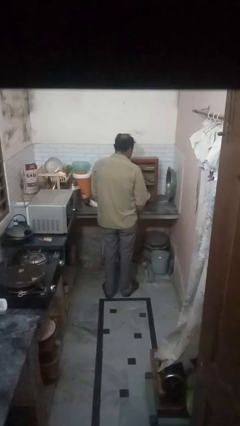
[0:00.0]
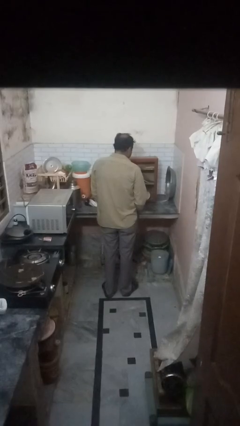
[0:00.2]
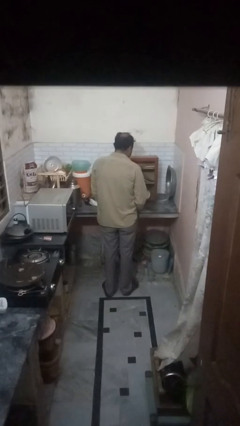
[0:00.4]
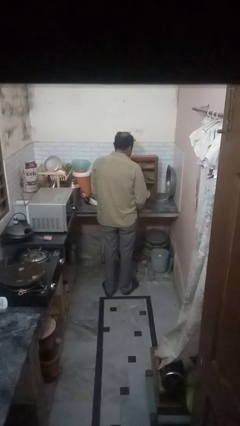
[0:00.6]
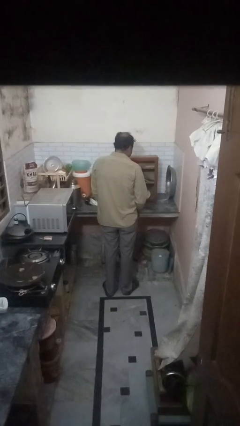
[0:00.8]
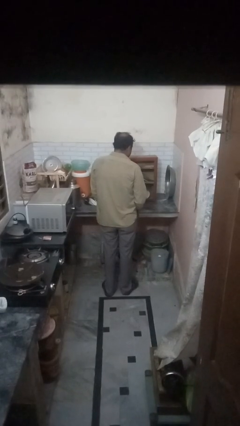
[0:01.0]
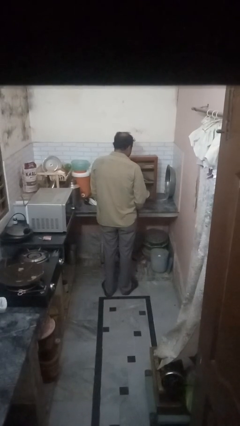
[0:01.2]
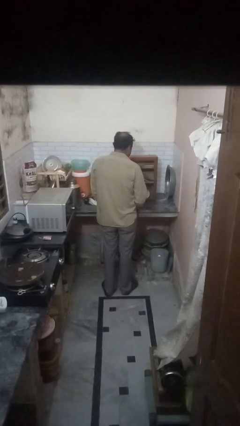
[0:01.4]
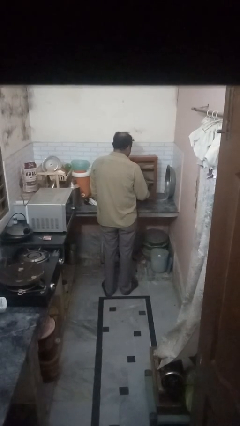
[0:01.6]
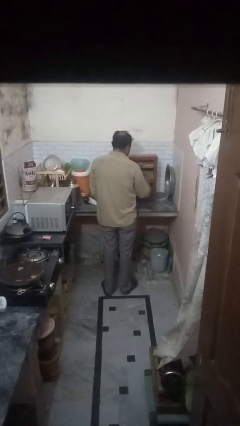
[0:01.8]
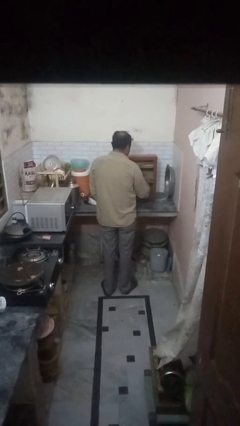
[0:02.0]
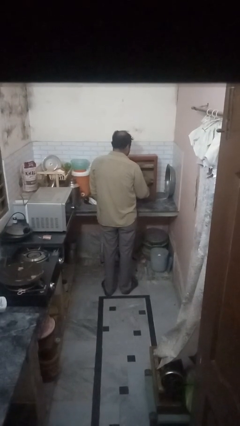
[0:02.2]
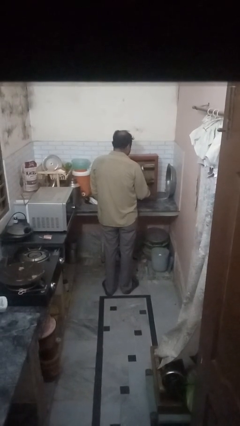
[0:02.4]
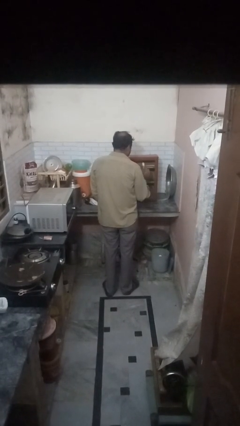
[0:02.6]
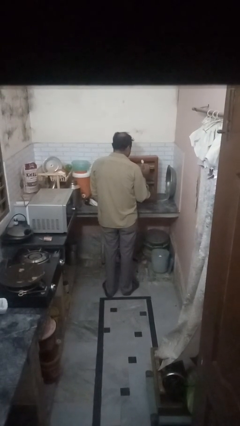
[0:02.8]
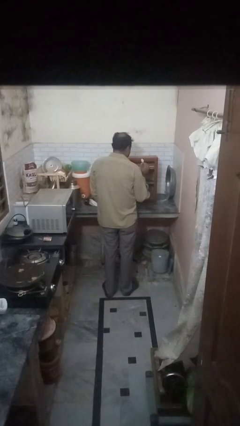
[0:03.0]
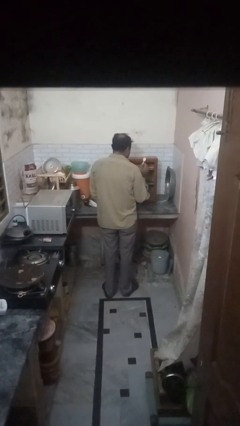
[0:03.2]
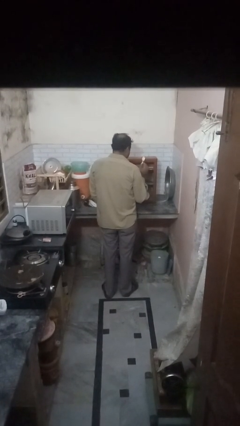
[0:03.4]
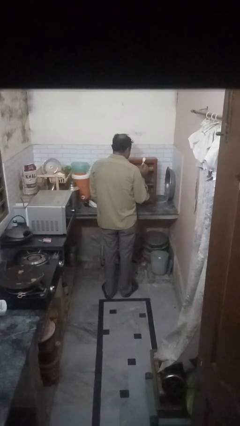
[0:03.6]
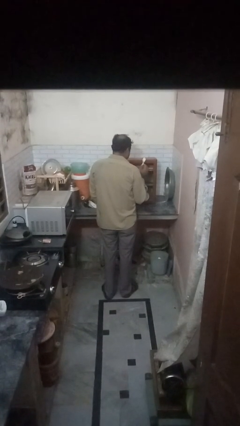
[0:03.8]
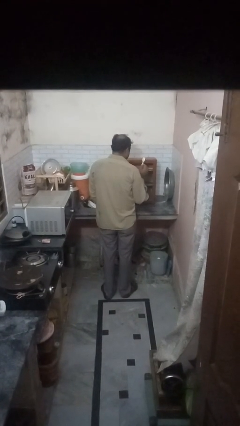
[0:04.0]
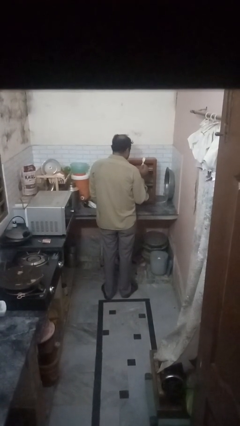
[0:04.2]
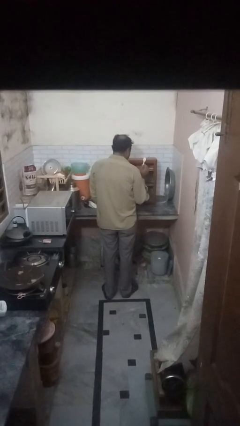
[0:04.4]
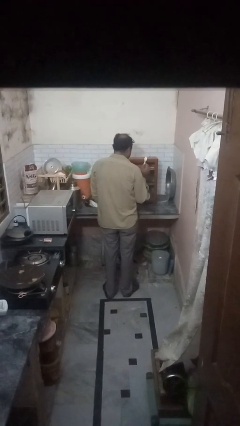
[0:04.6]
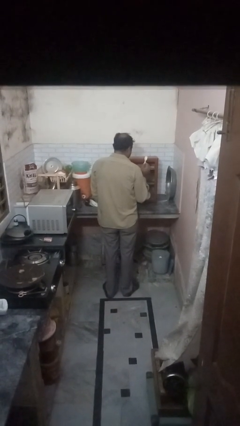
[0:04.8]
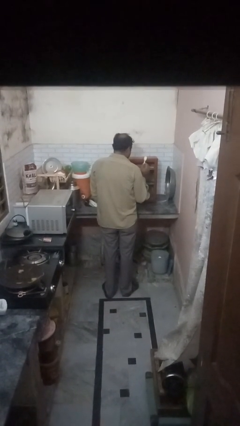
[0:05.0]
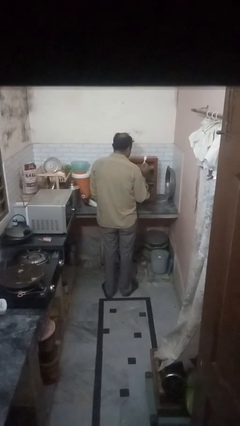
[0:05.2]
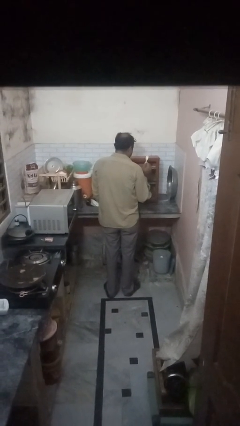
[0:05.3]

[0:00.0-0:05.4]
person puts object in cabinet

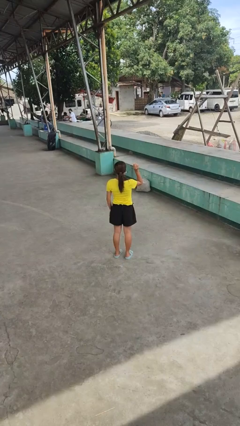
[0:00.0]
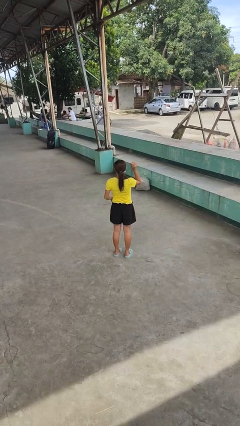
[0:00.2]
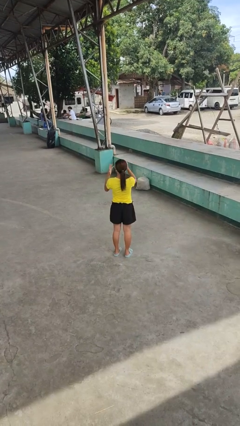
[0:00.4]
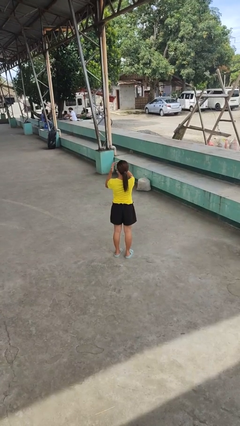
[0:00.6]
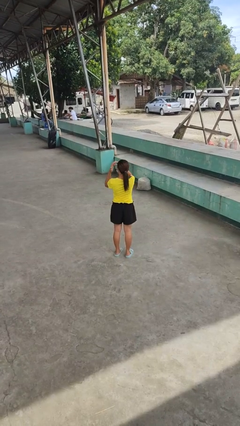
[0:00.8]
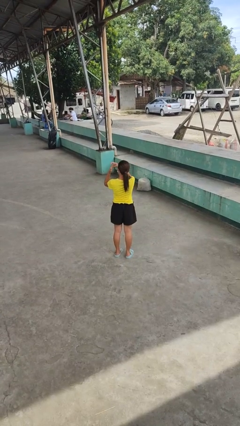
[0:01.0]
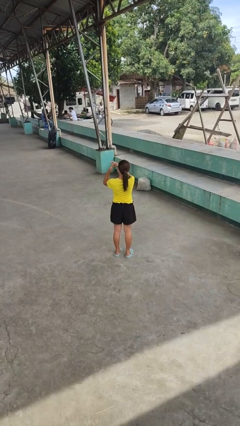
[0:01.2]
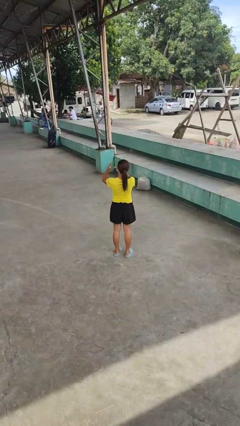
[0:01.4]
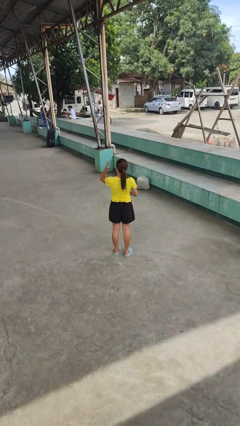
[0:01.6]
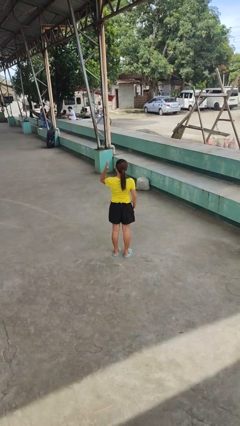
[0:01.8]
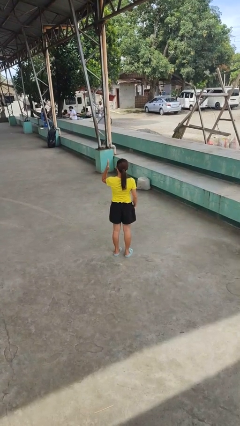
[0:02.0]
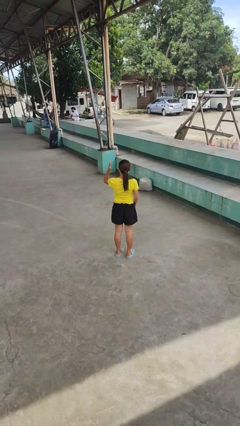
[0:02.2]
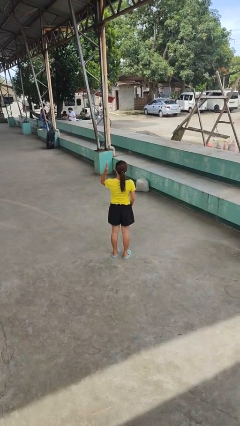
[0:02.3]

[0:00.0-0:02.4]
person puts on ring

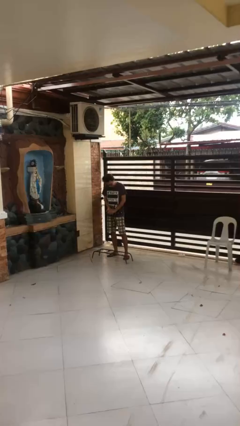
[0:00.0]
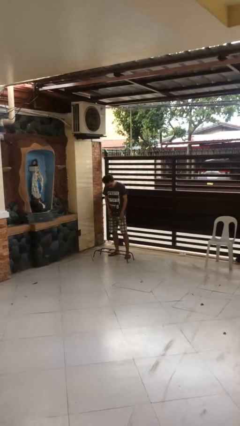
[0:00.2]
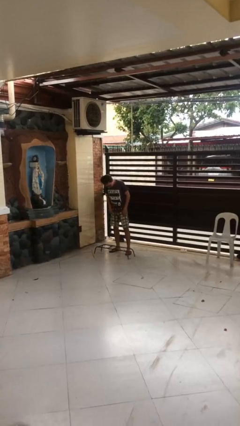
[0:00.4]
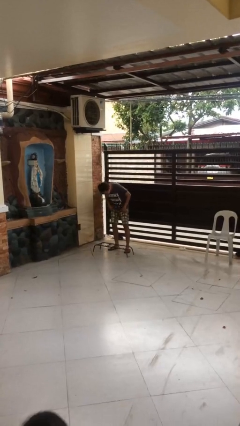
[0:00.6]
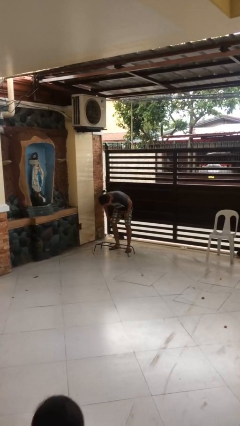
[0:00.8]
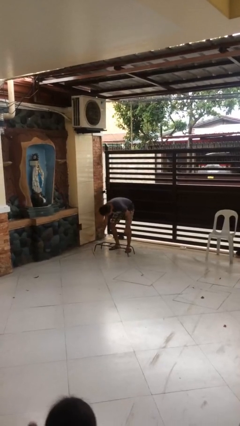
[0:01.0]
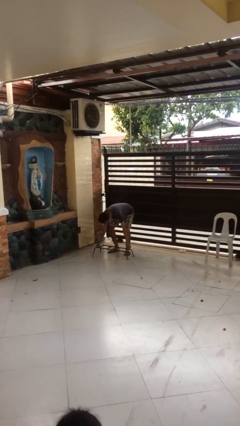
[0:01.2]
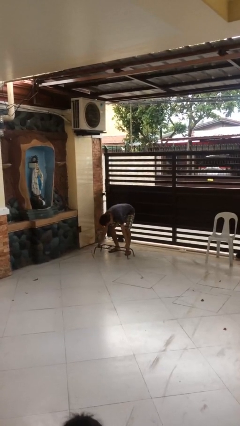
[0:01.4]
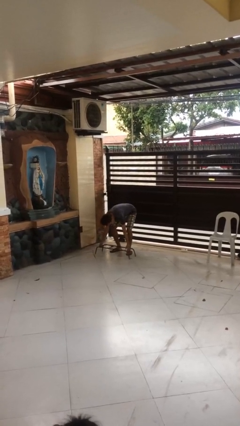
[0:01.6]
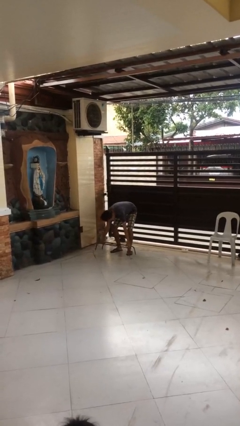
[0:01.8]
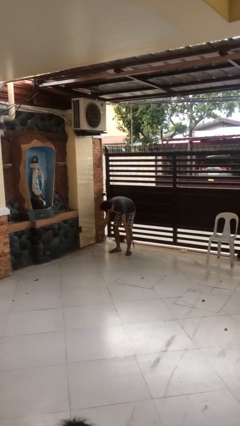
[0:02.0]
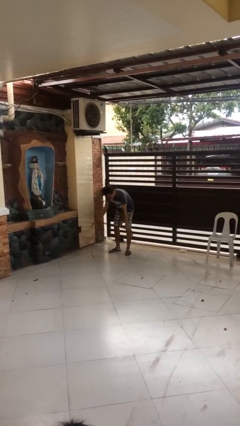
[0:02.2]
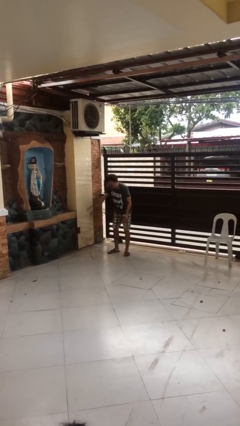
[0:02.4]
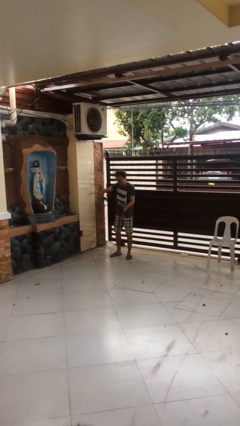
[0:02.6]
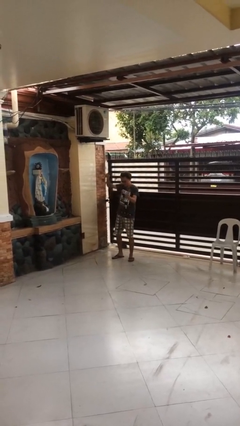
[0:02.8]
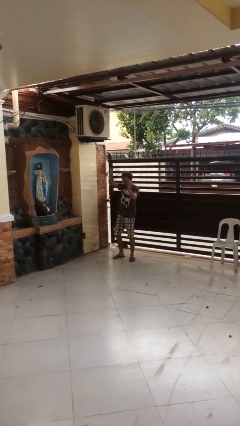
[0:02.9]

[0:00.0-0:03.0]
person picks up object from floor

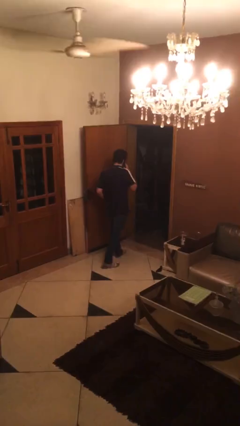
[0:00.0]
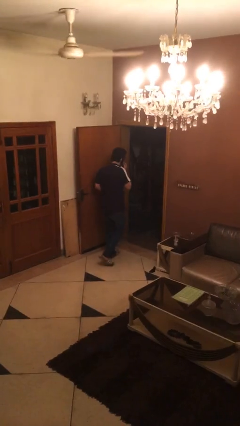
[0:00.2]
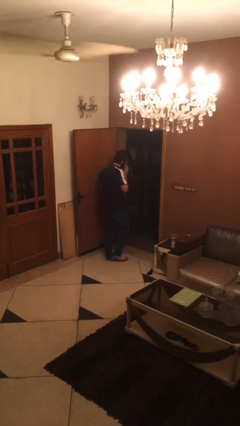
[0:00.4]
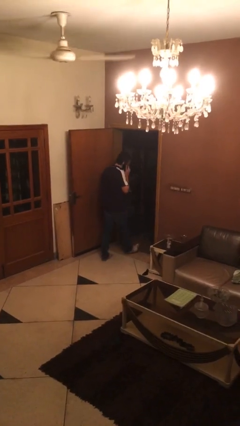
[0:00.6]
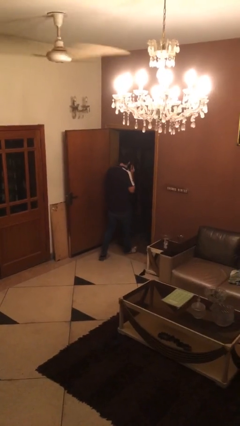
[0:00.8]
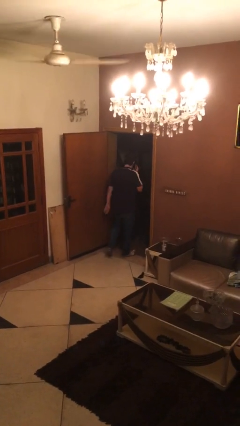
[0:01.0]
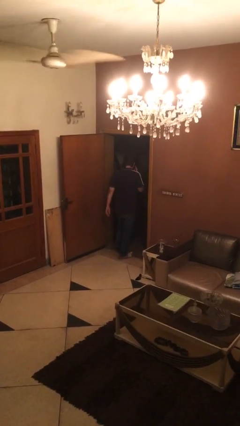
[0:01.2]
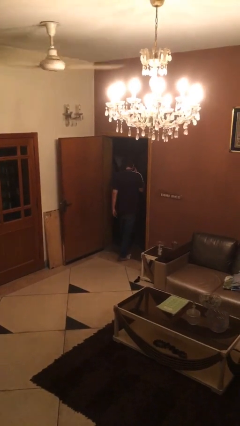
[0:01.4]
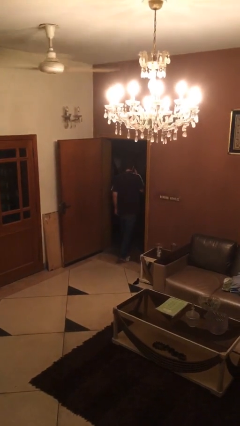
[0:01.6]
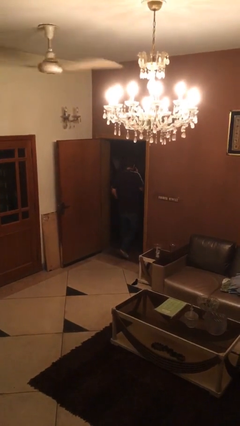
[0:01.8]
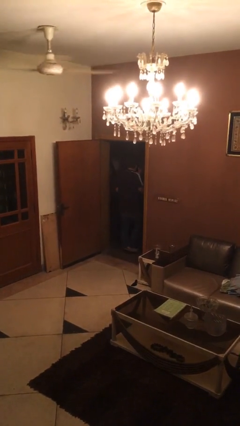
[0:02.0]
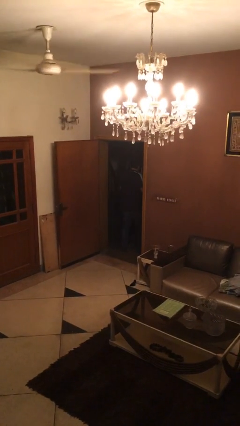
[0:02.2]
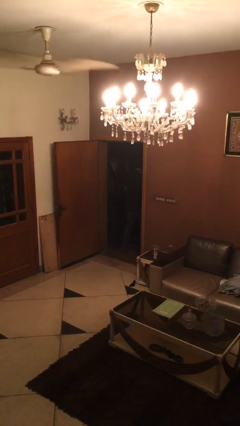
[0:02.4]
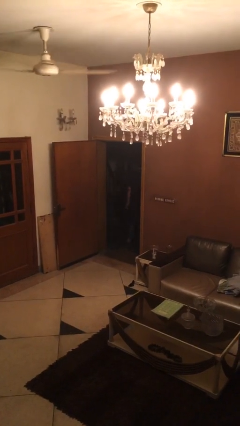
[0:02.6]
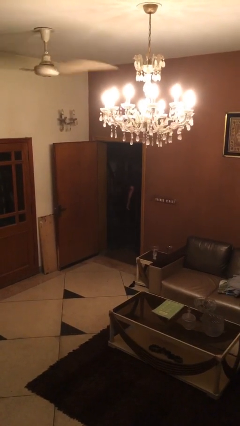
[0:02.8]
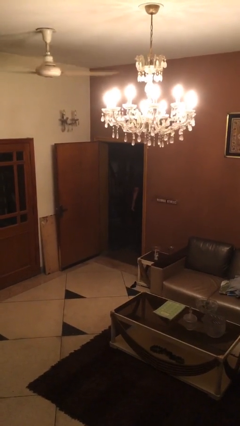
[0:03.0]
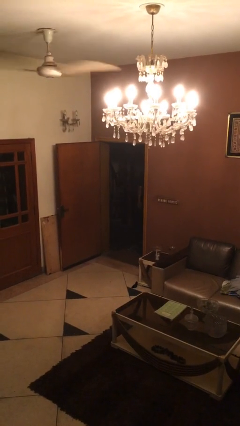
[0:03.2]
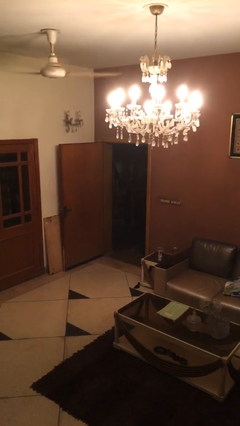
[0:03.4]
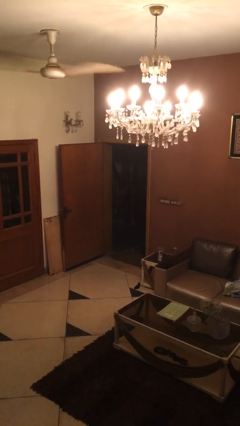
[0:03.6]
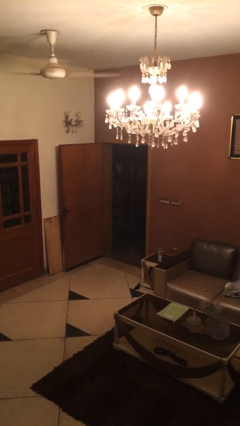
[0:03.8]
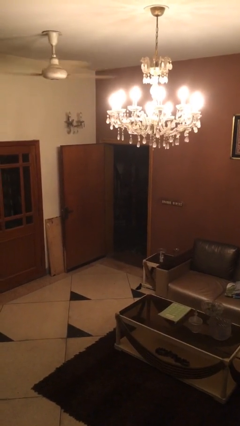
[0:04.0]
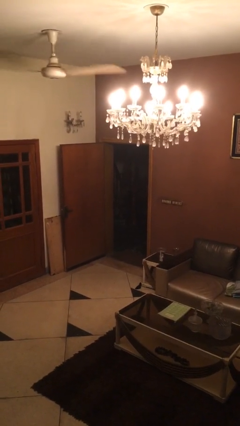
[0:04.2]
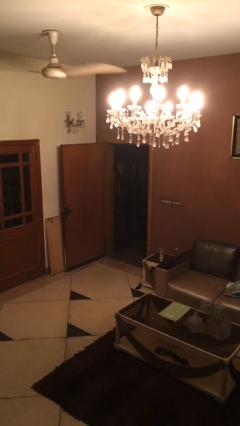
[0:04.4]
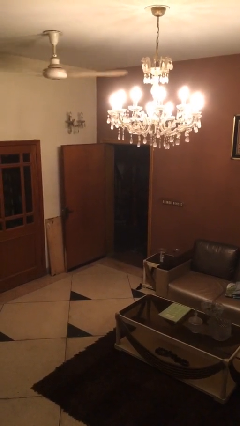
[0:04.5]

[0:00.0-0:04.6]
person exits scene through structure

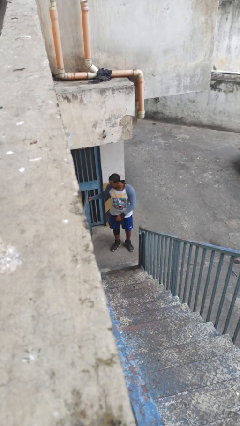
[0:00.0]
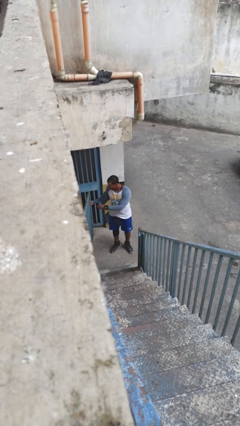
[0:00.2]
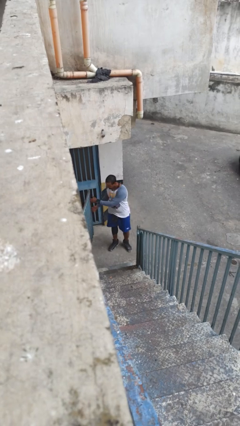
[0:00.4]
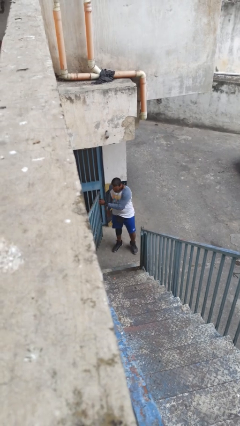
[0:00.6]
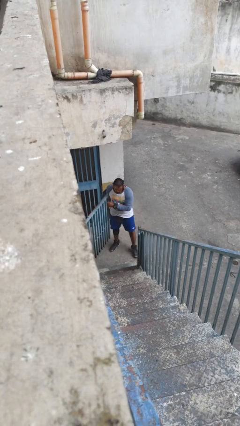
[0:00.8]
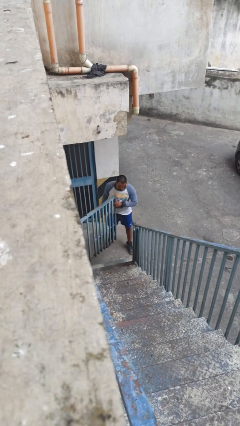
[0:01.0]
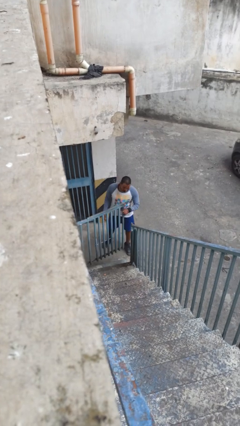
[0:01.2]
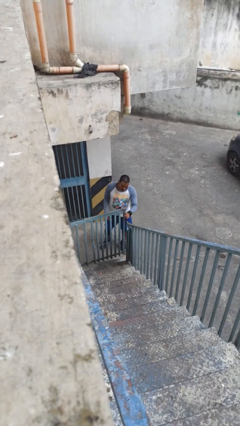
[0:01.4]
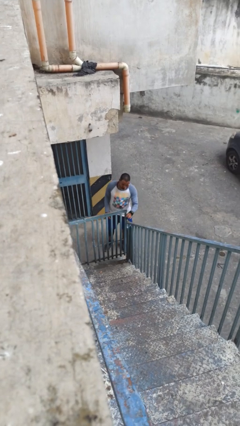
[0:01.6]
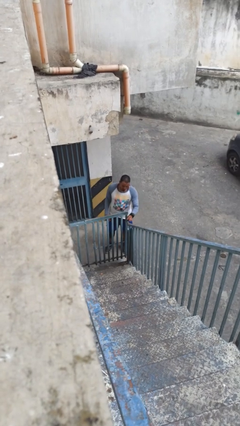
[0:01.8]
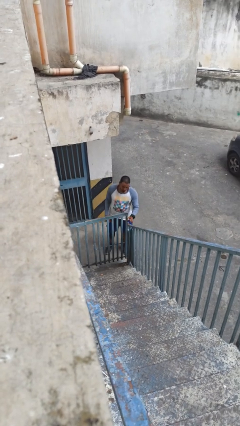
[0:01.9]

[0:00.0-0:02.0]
person closes facility door

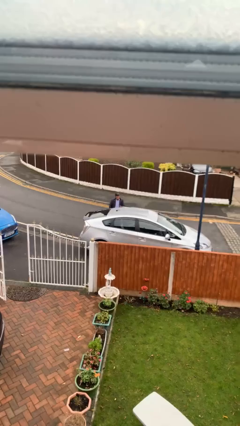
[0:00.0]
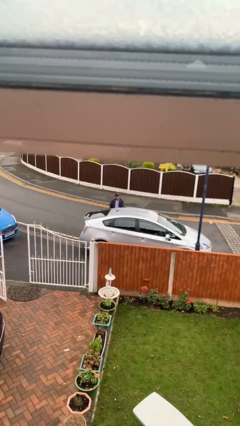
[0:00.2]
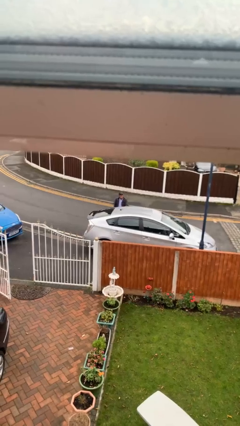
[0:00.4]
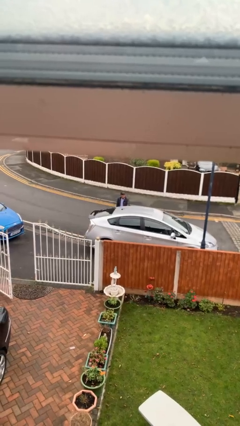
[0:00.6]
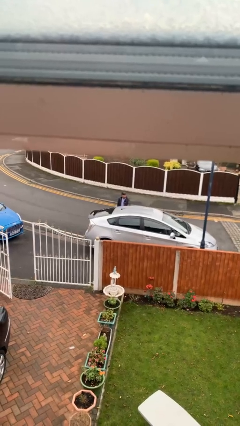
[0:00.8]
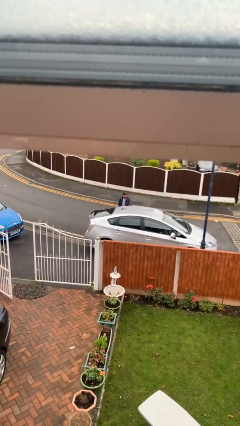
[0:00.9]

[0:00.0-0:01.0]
person closes car door
